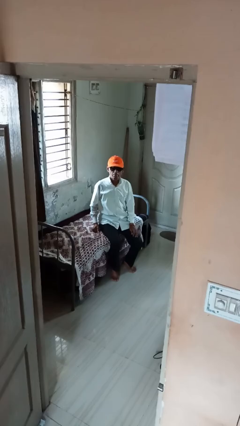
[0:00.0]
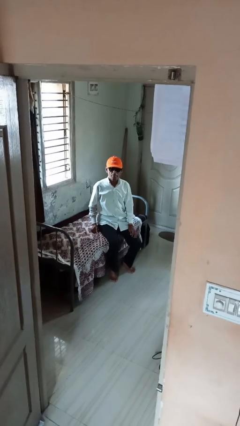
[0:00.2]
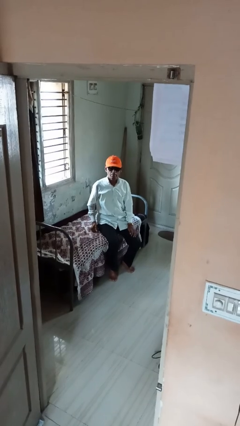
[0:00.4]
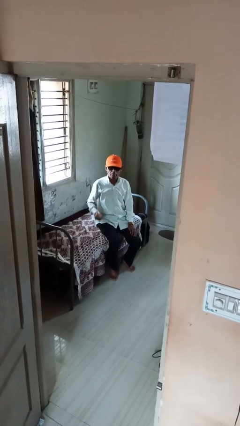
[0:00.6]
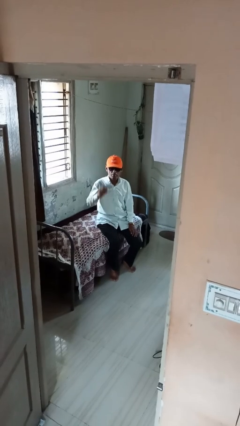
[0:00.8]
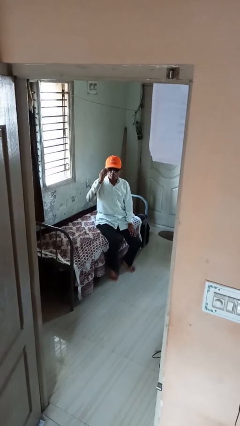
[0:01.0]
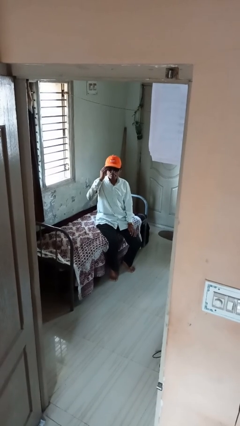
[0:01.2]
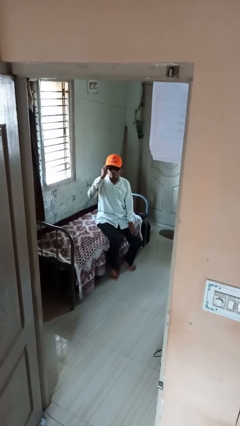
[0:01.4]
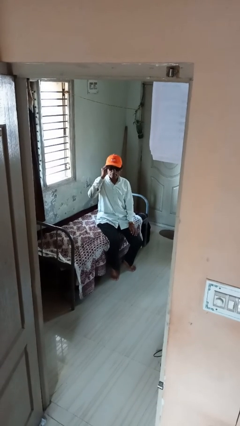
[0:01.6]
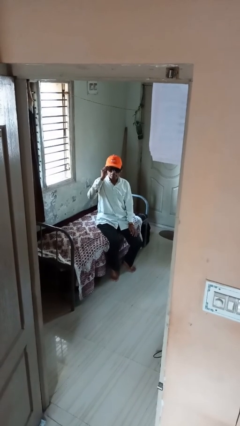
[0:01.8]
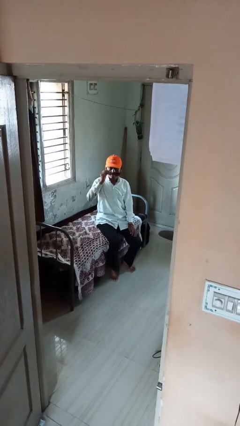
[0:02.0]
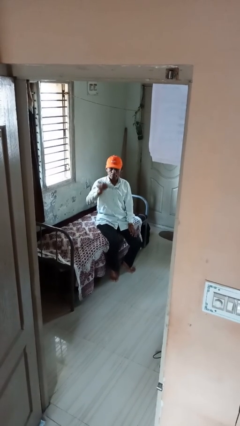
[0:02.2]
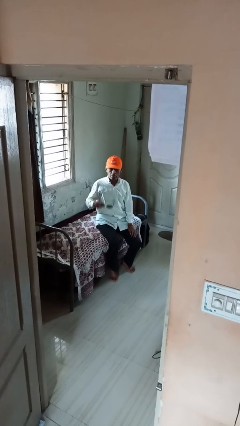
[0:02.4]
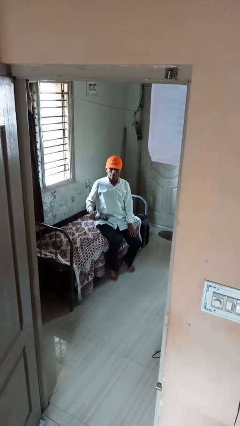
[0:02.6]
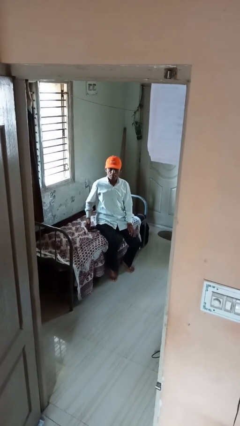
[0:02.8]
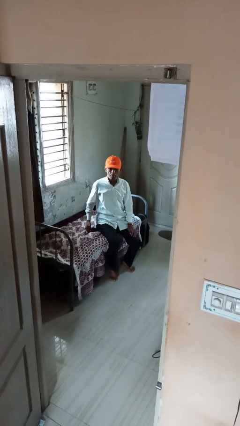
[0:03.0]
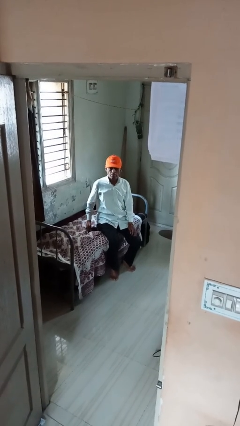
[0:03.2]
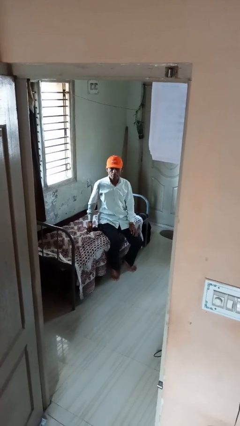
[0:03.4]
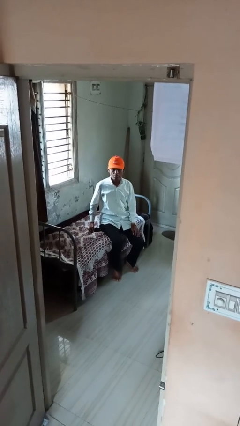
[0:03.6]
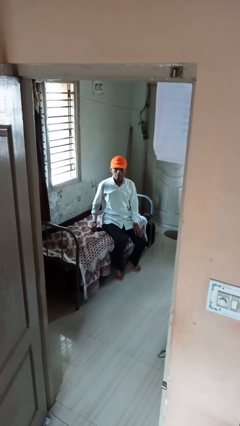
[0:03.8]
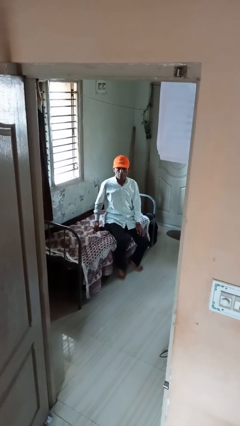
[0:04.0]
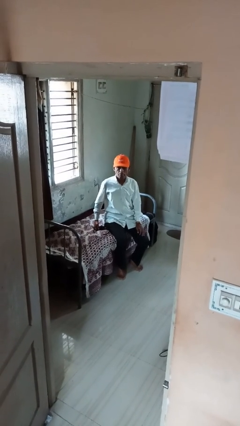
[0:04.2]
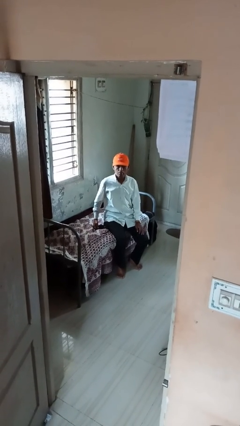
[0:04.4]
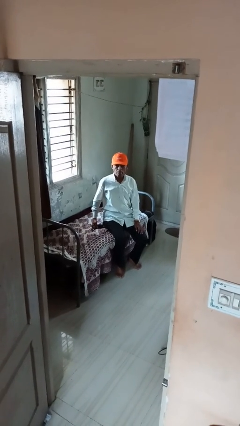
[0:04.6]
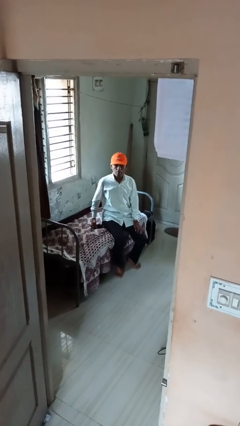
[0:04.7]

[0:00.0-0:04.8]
person takes off sunglasses

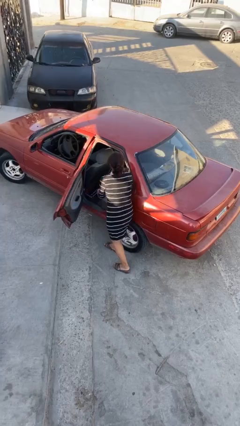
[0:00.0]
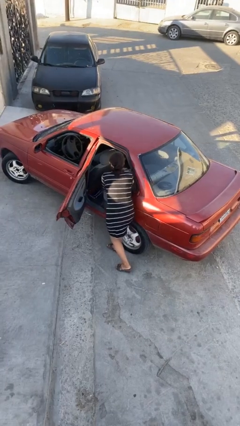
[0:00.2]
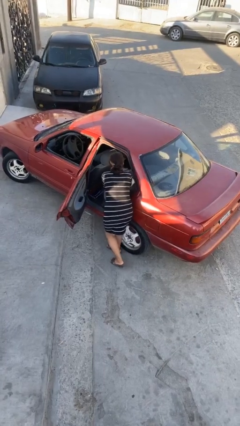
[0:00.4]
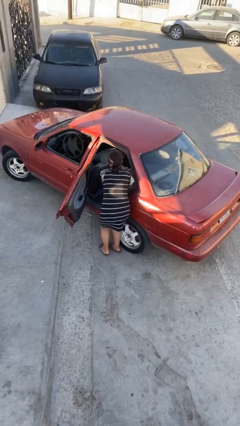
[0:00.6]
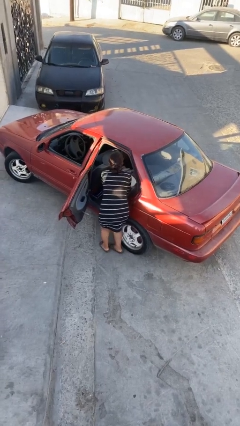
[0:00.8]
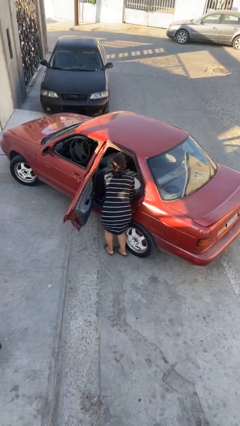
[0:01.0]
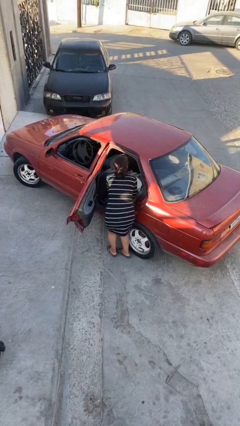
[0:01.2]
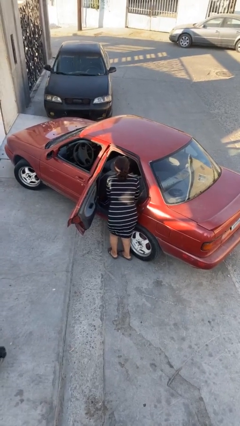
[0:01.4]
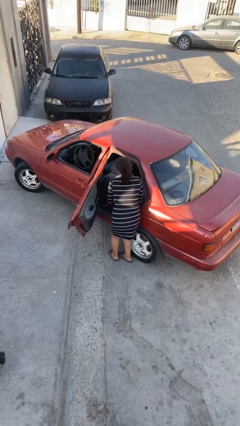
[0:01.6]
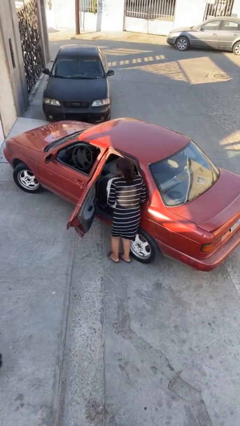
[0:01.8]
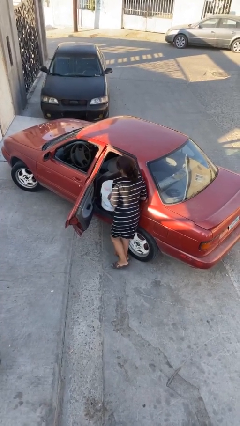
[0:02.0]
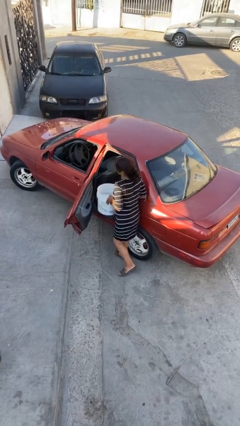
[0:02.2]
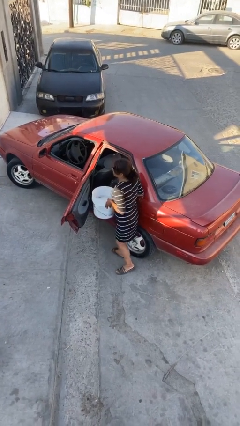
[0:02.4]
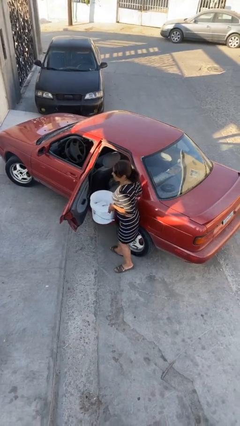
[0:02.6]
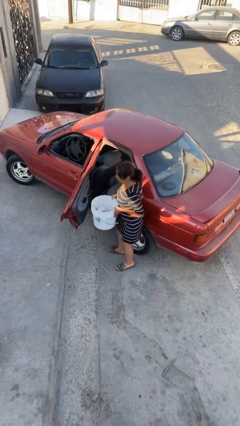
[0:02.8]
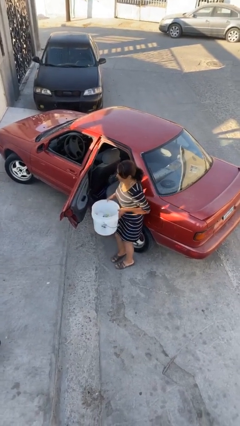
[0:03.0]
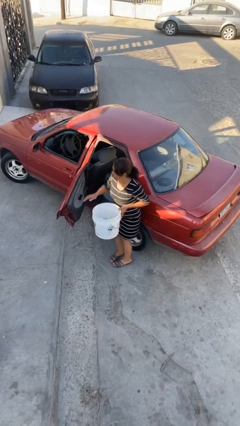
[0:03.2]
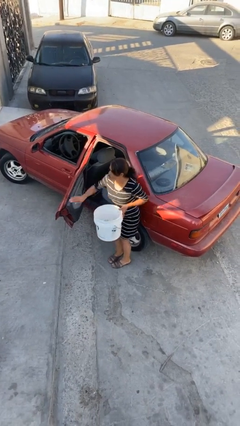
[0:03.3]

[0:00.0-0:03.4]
person unloads car

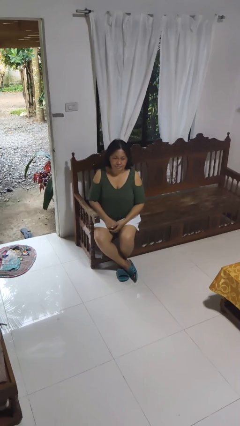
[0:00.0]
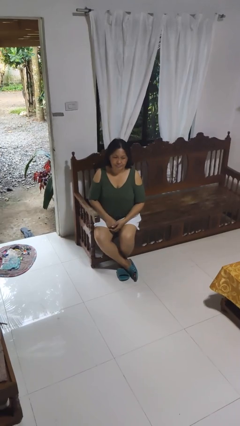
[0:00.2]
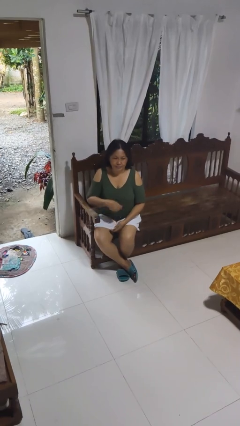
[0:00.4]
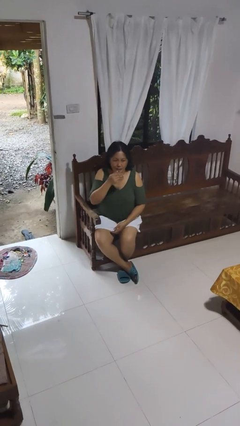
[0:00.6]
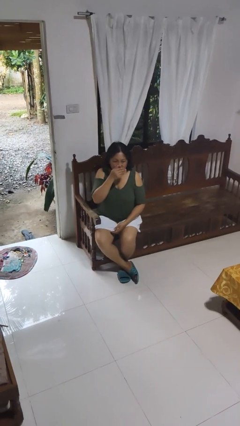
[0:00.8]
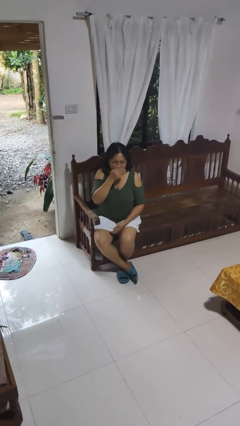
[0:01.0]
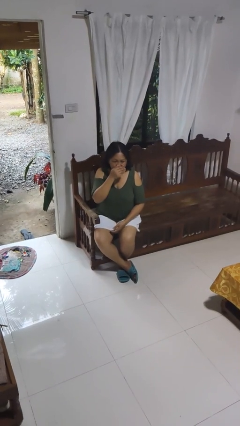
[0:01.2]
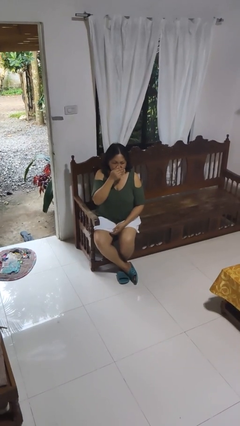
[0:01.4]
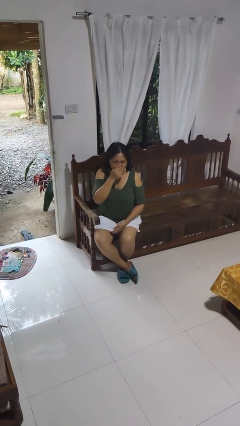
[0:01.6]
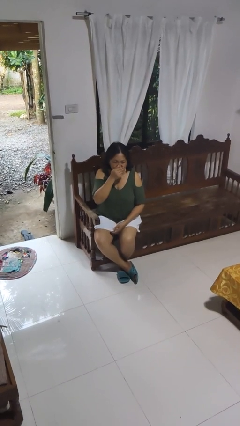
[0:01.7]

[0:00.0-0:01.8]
person sneezes into hand

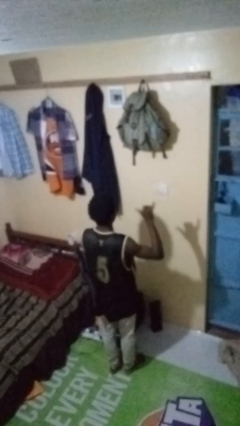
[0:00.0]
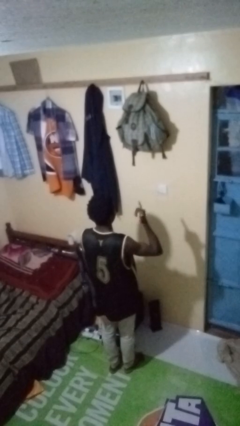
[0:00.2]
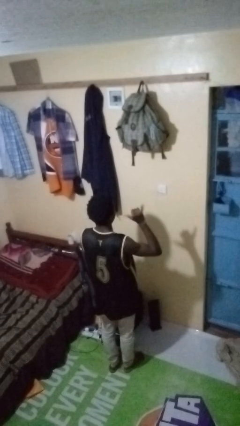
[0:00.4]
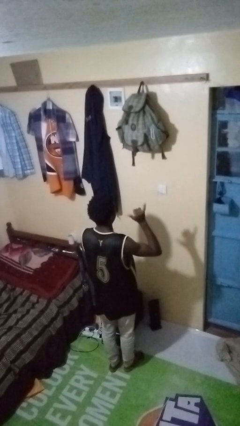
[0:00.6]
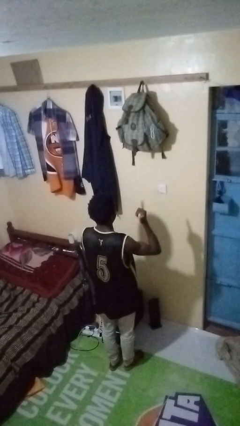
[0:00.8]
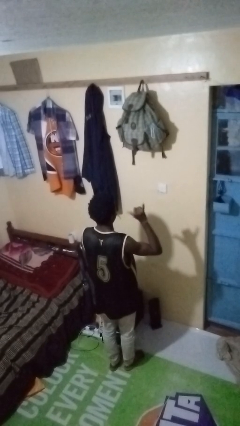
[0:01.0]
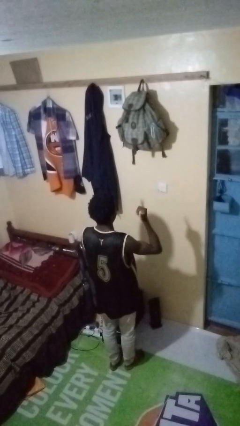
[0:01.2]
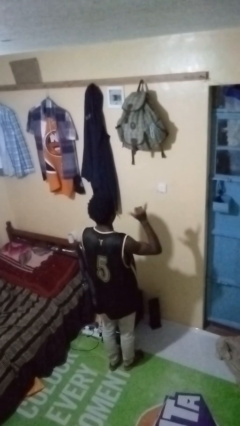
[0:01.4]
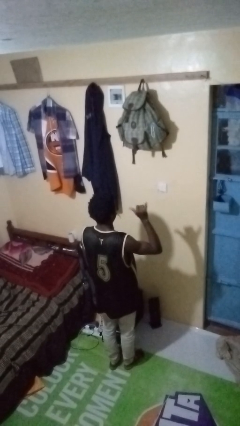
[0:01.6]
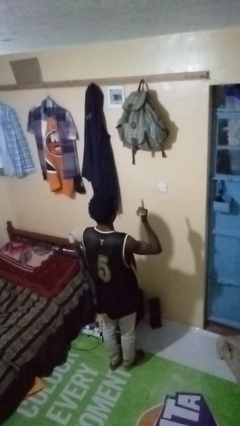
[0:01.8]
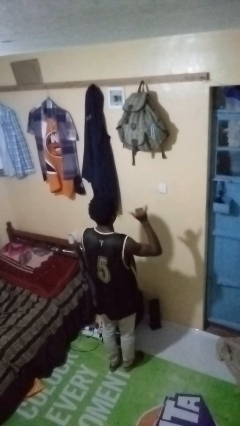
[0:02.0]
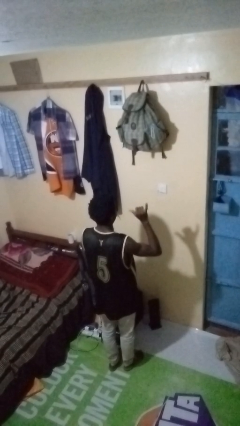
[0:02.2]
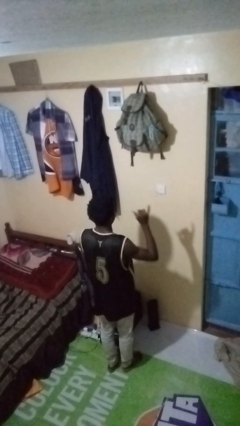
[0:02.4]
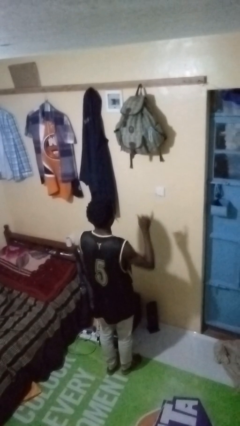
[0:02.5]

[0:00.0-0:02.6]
person gestures hang loose

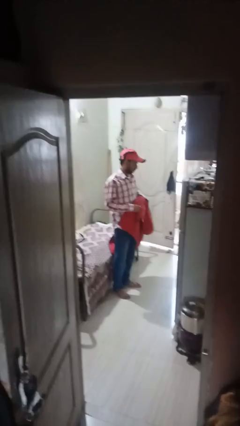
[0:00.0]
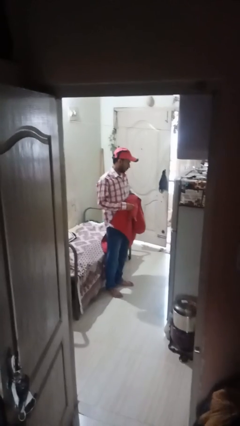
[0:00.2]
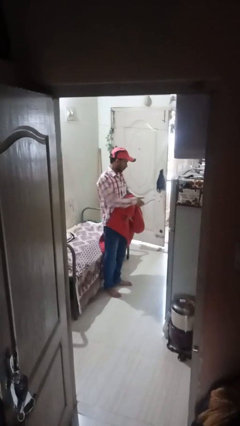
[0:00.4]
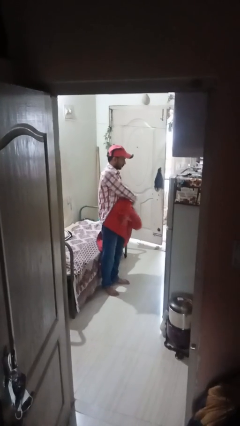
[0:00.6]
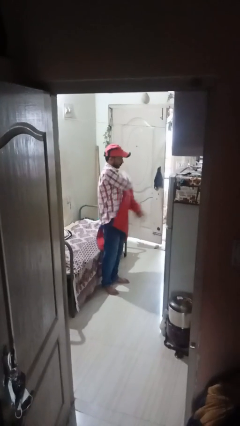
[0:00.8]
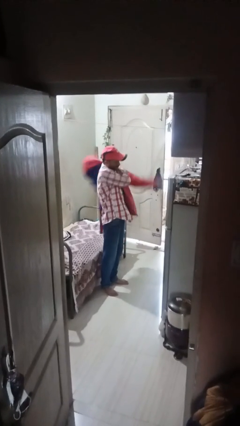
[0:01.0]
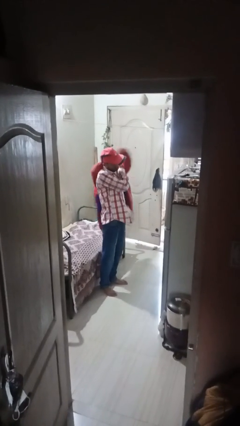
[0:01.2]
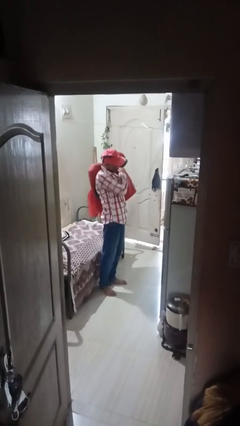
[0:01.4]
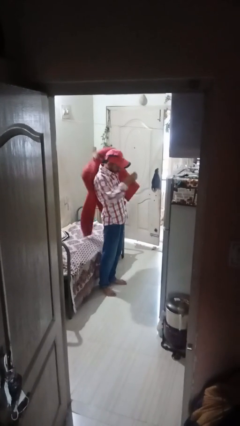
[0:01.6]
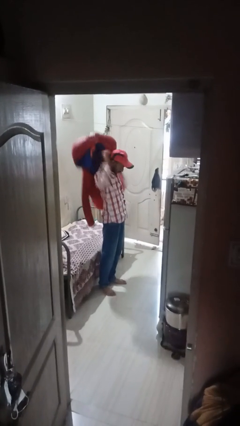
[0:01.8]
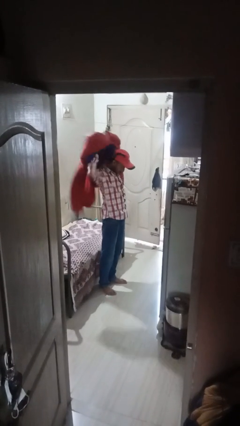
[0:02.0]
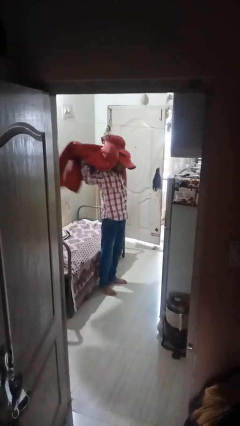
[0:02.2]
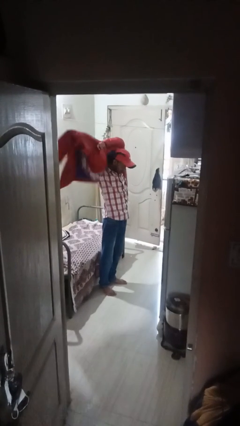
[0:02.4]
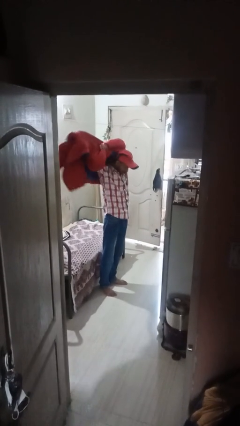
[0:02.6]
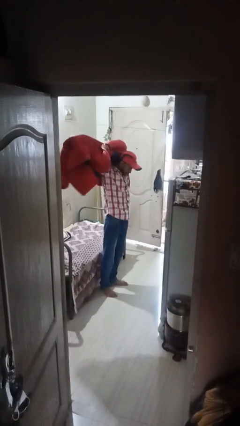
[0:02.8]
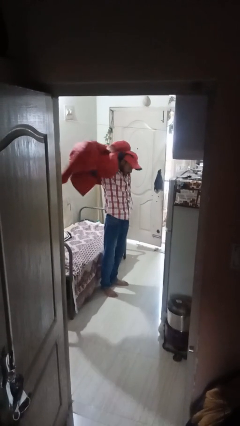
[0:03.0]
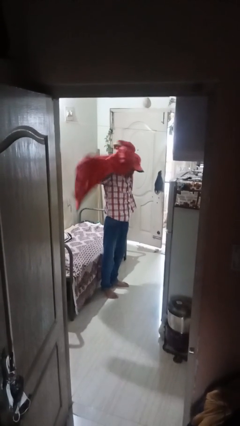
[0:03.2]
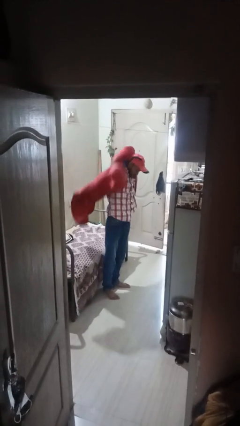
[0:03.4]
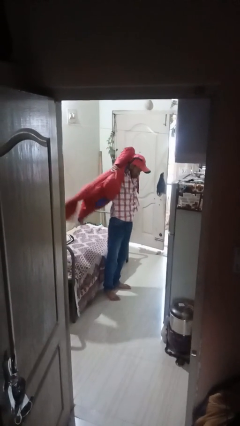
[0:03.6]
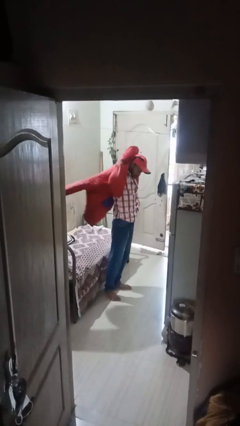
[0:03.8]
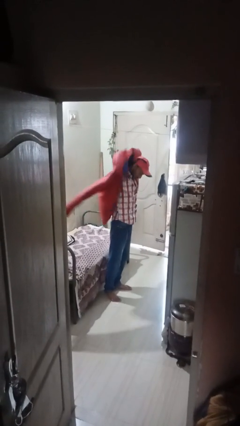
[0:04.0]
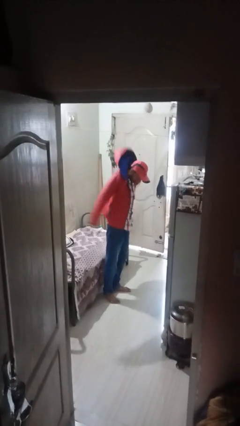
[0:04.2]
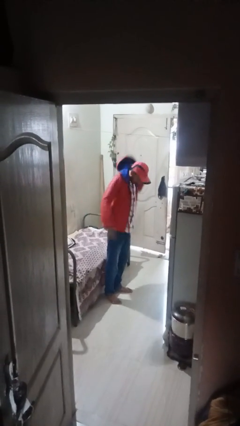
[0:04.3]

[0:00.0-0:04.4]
person puts on jacket

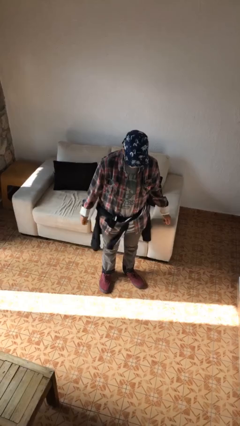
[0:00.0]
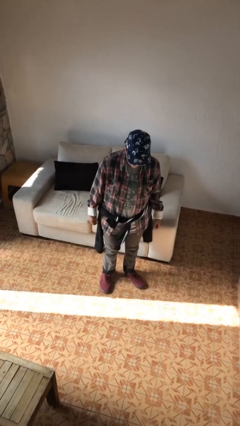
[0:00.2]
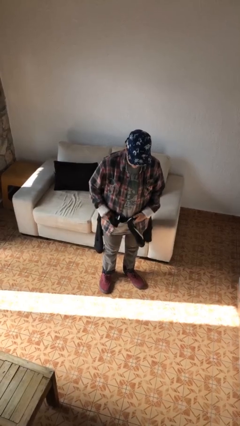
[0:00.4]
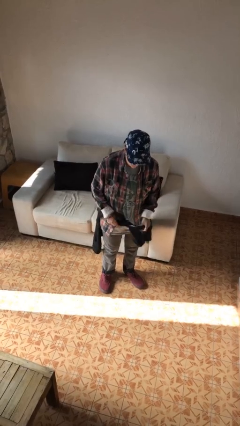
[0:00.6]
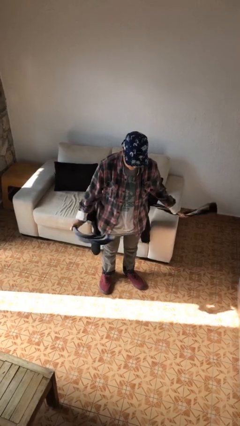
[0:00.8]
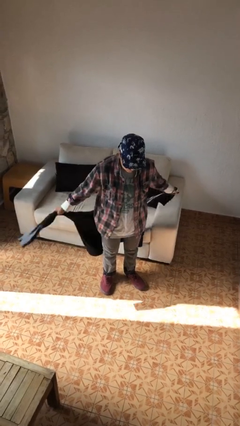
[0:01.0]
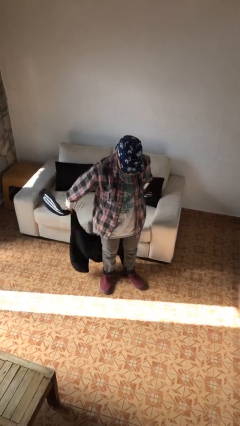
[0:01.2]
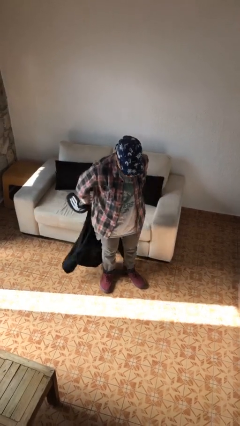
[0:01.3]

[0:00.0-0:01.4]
person unties jacket around waist
